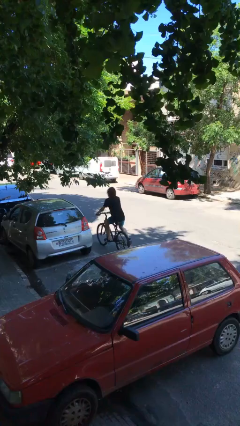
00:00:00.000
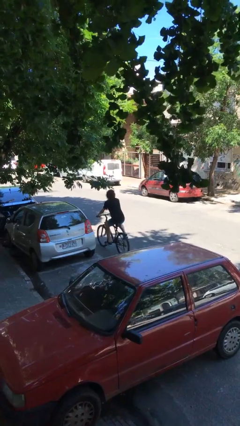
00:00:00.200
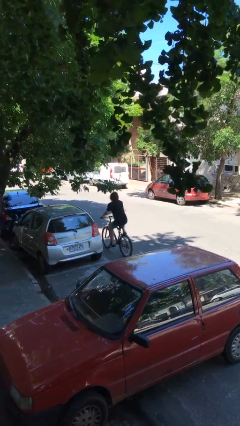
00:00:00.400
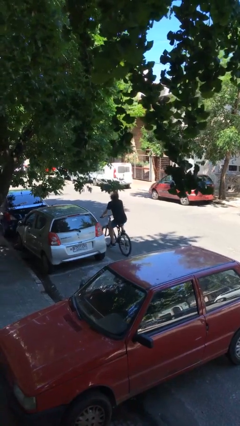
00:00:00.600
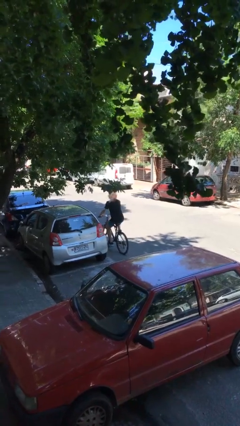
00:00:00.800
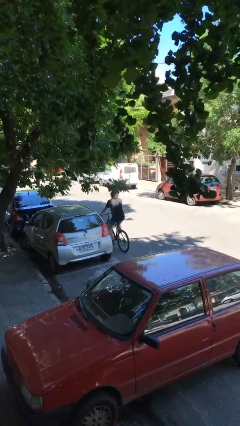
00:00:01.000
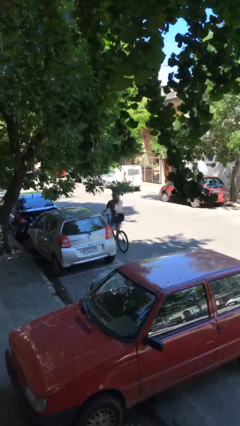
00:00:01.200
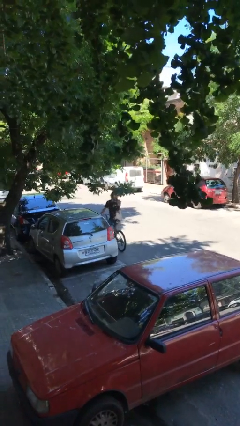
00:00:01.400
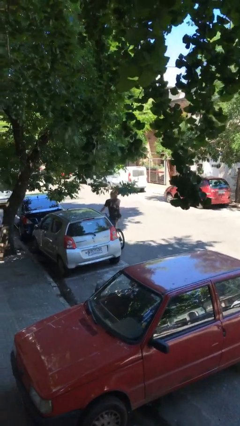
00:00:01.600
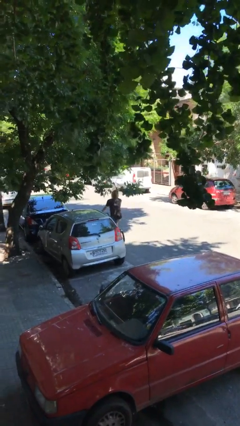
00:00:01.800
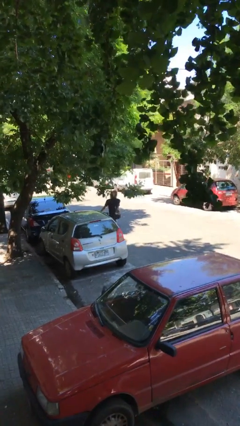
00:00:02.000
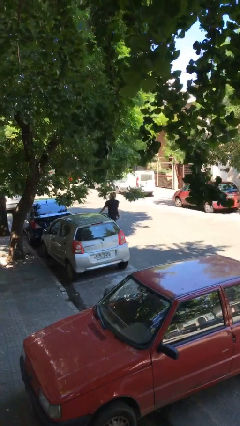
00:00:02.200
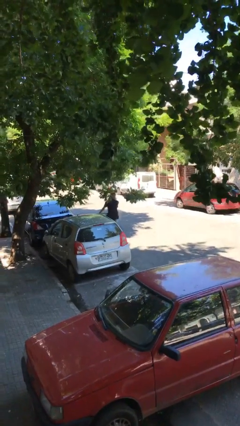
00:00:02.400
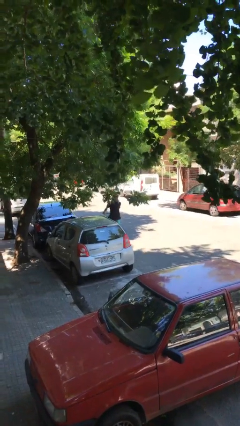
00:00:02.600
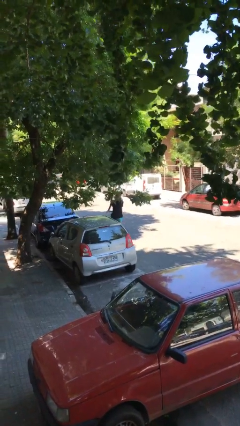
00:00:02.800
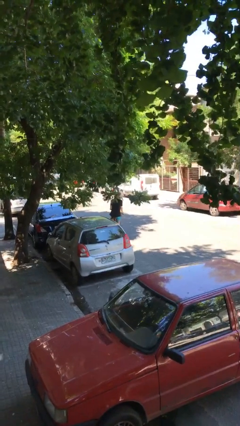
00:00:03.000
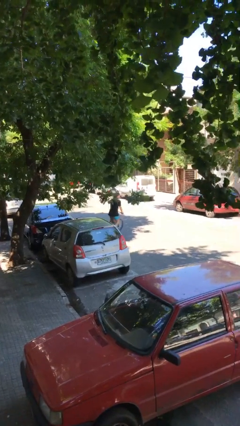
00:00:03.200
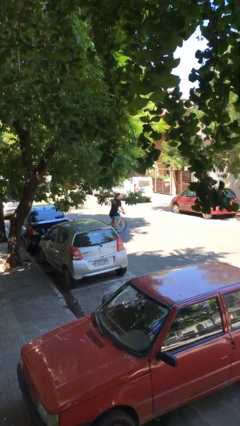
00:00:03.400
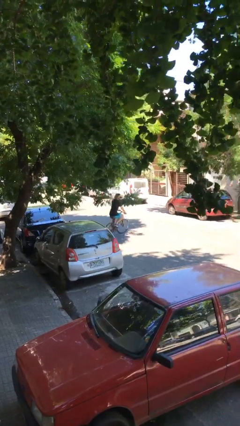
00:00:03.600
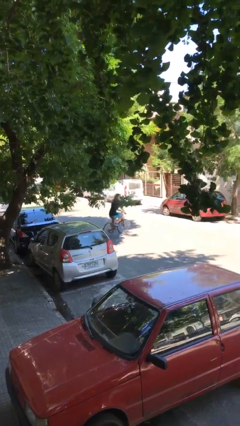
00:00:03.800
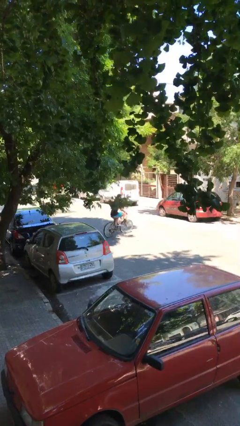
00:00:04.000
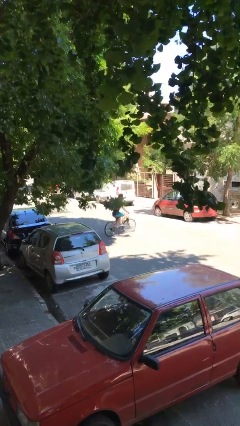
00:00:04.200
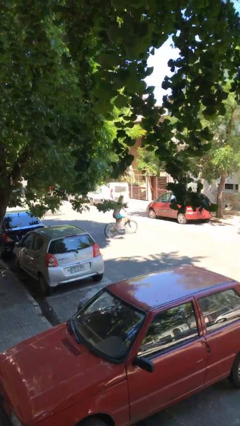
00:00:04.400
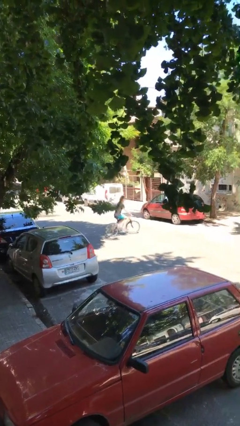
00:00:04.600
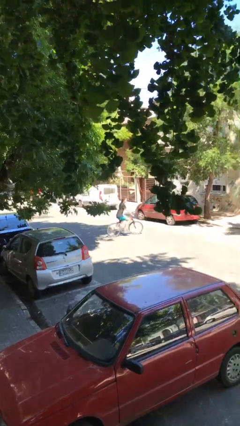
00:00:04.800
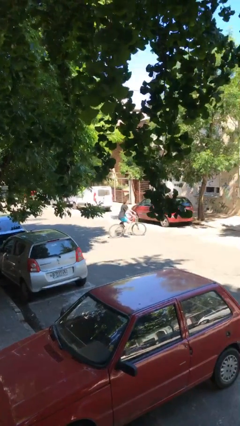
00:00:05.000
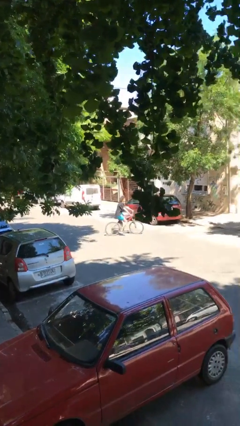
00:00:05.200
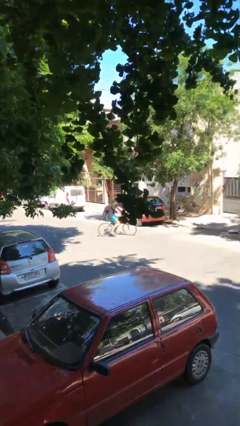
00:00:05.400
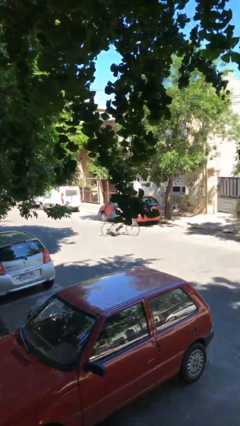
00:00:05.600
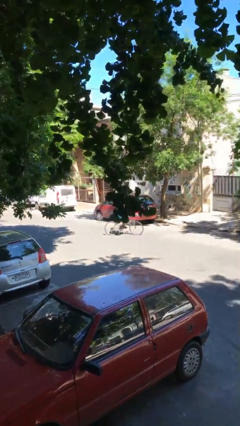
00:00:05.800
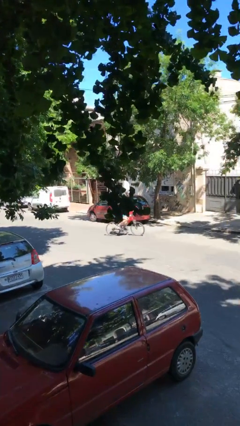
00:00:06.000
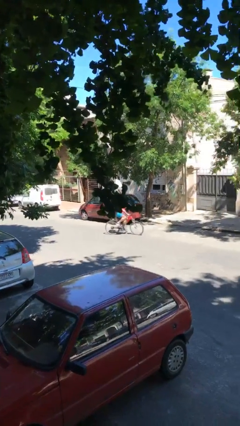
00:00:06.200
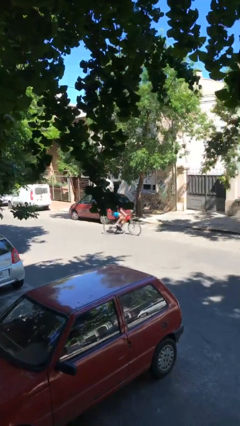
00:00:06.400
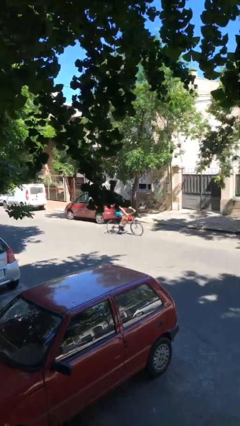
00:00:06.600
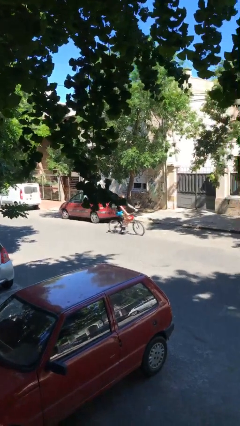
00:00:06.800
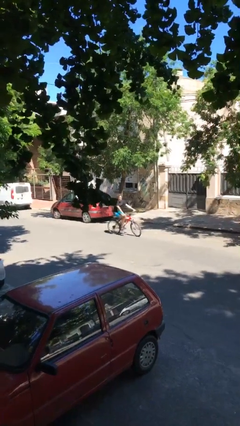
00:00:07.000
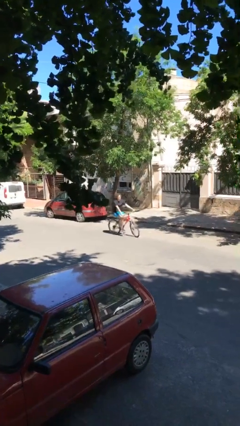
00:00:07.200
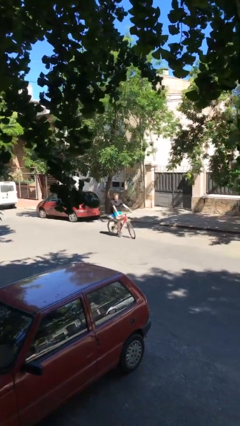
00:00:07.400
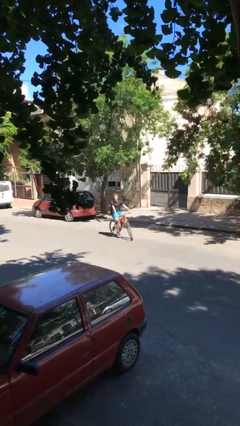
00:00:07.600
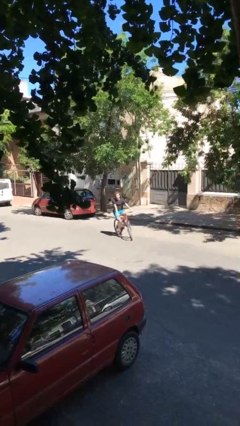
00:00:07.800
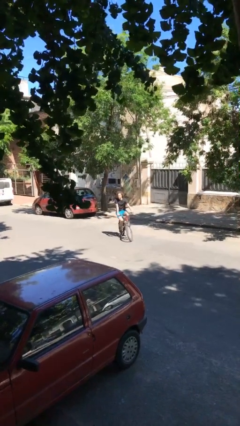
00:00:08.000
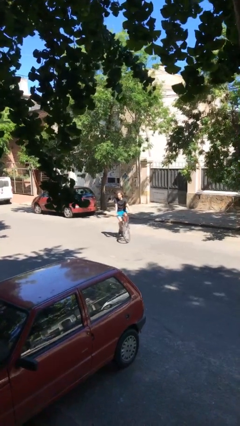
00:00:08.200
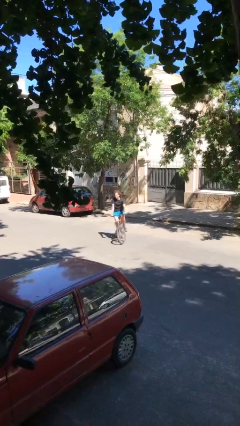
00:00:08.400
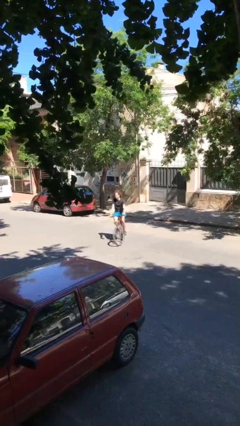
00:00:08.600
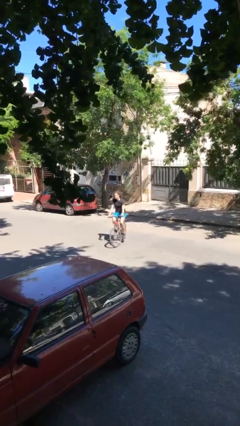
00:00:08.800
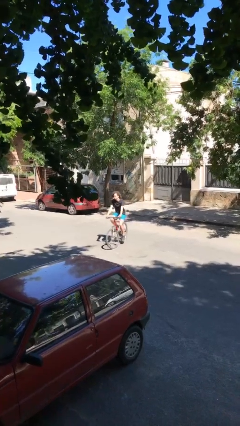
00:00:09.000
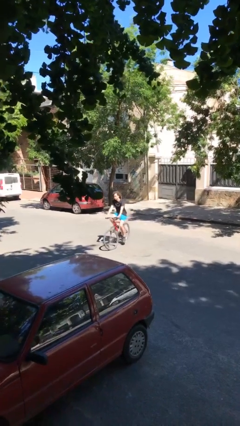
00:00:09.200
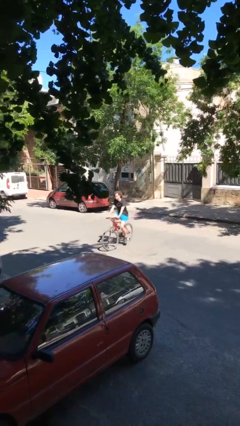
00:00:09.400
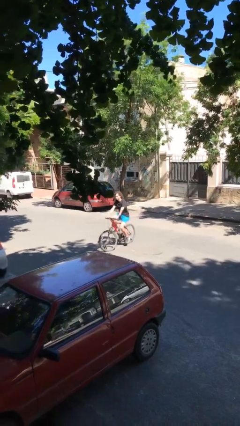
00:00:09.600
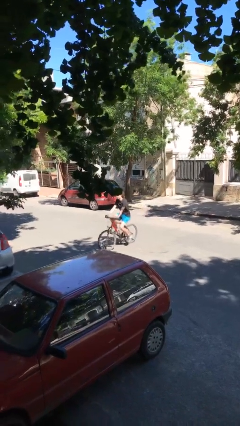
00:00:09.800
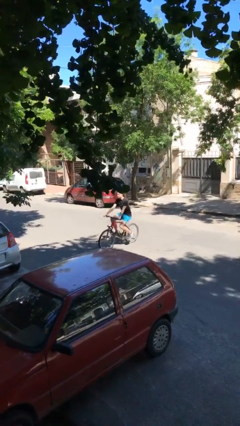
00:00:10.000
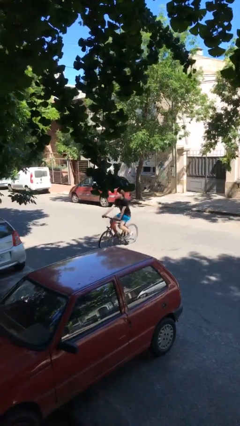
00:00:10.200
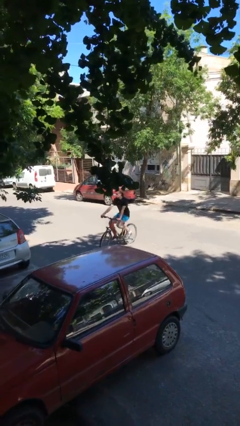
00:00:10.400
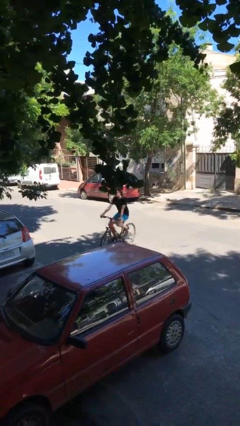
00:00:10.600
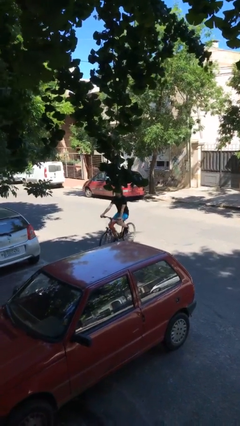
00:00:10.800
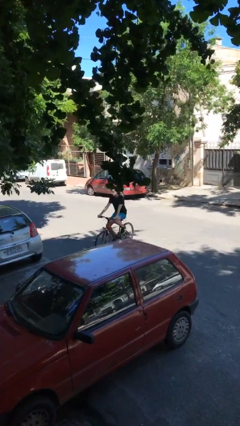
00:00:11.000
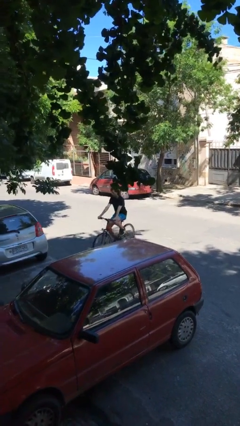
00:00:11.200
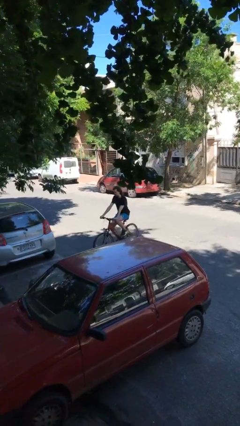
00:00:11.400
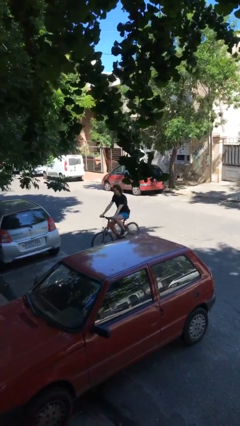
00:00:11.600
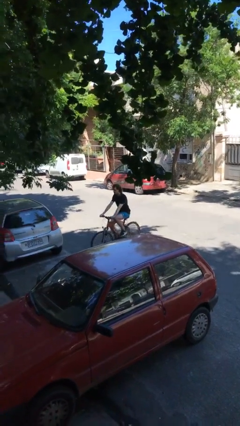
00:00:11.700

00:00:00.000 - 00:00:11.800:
person rides bicycle

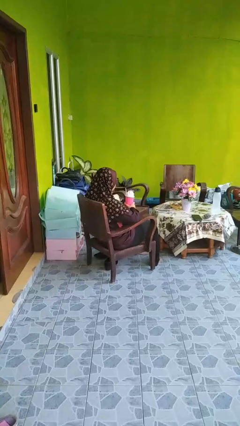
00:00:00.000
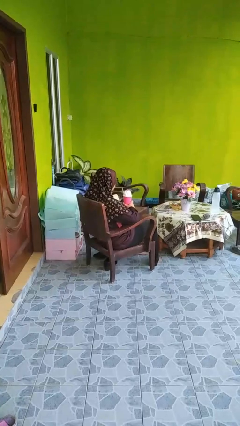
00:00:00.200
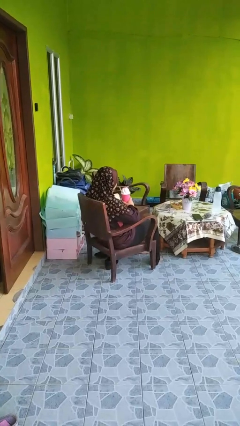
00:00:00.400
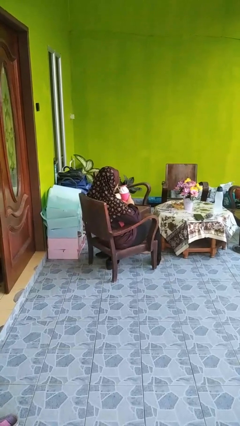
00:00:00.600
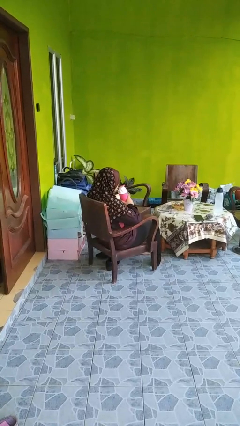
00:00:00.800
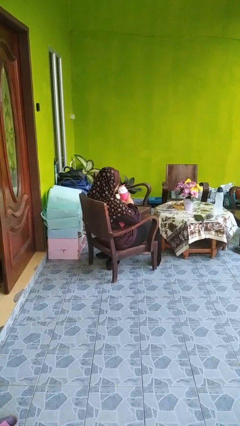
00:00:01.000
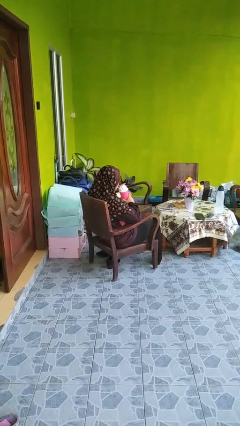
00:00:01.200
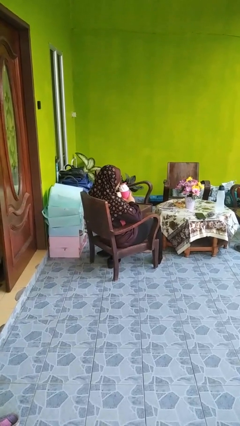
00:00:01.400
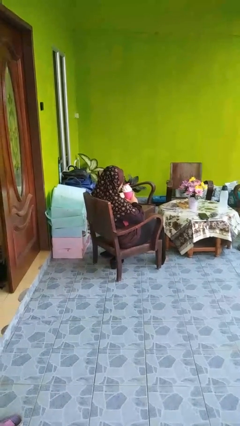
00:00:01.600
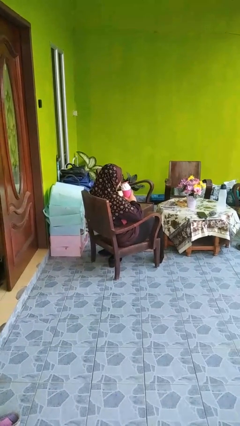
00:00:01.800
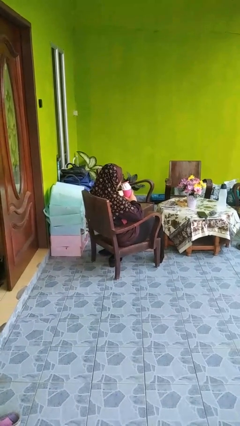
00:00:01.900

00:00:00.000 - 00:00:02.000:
person drinks from straw

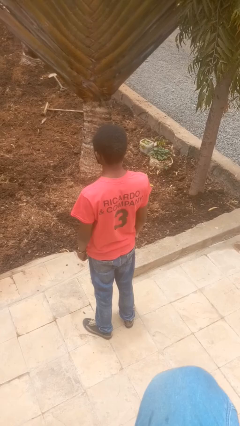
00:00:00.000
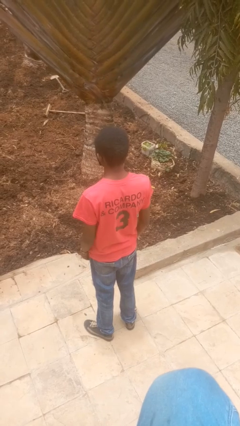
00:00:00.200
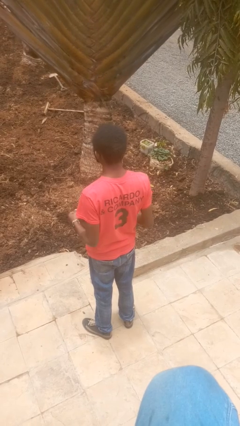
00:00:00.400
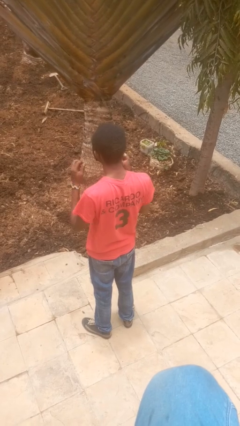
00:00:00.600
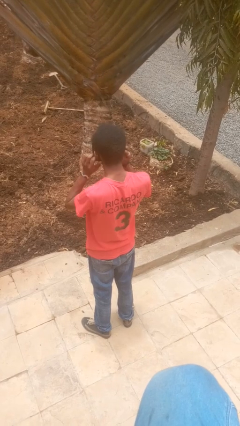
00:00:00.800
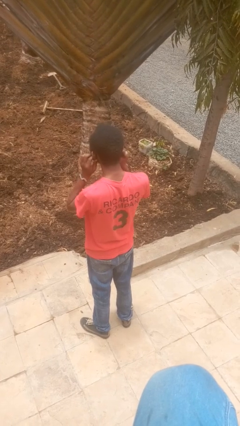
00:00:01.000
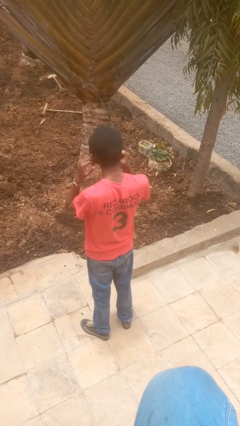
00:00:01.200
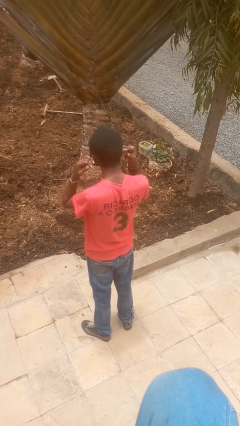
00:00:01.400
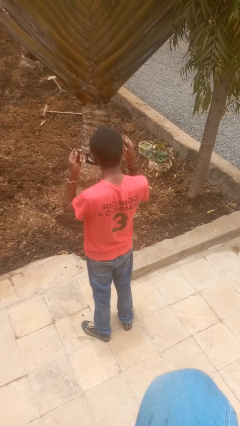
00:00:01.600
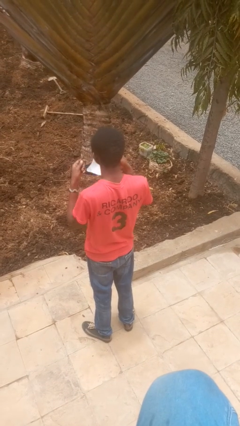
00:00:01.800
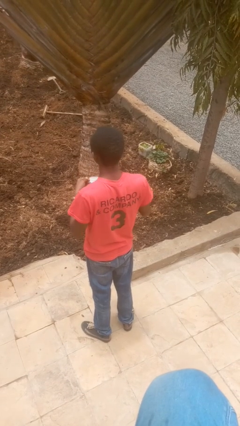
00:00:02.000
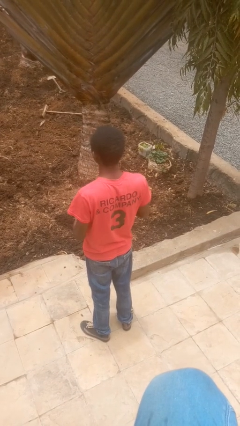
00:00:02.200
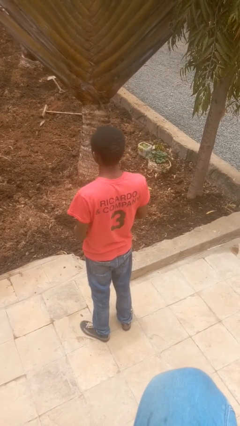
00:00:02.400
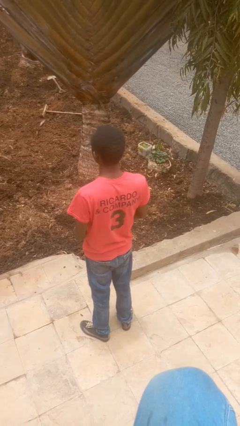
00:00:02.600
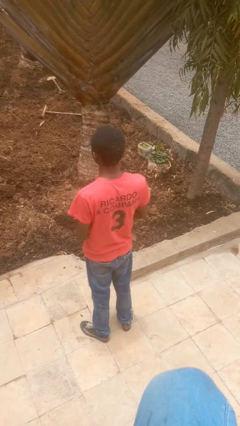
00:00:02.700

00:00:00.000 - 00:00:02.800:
person takes off facemask

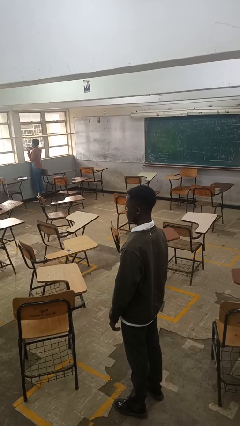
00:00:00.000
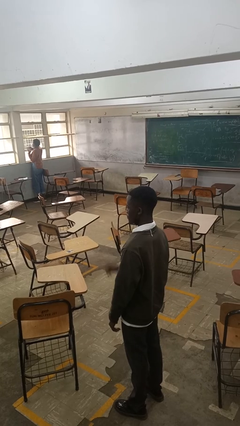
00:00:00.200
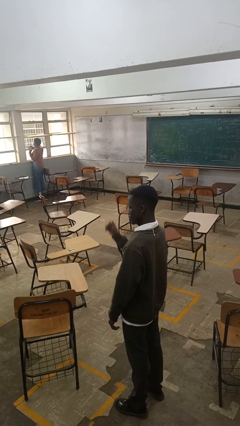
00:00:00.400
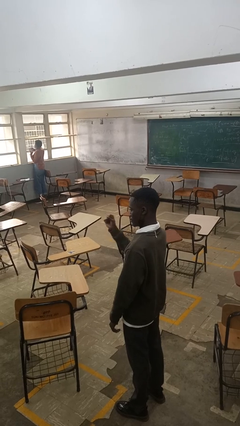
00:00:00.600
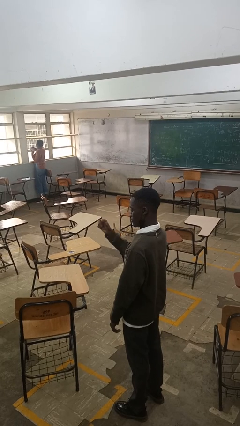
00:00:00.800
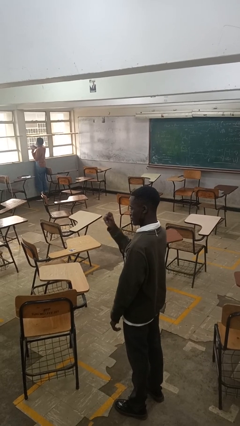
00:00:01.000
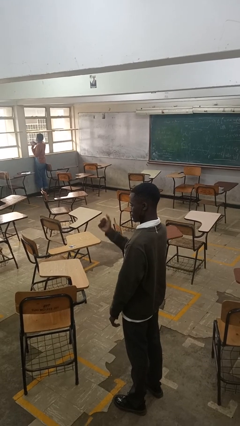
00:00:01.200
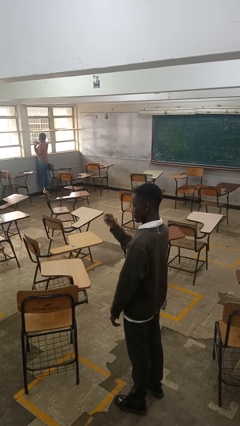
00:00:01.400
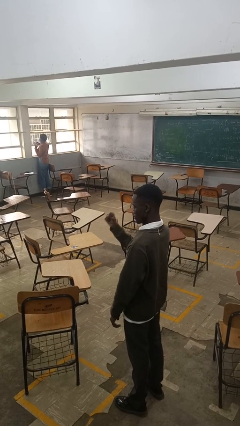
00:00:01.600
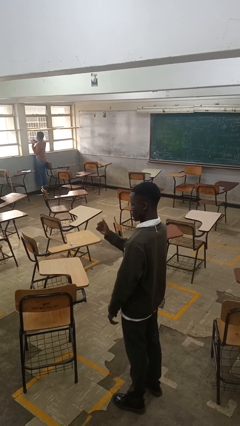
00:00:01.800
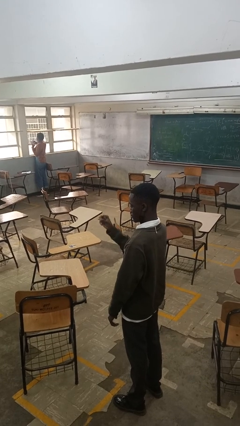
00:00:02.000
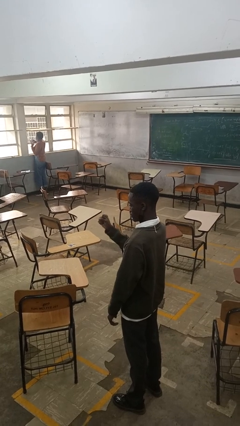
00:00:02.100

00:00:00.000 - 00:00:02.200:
person snaps fingers
